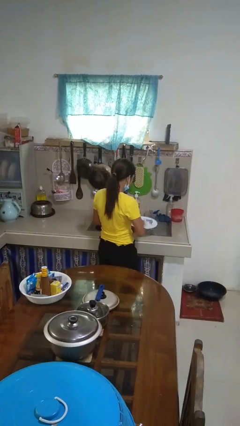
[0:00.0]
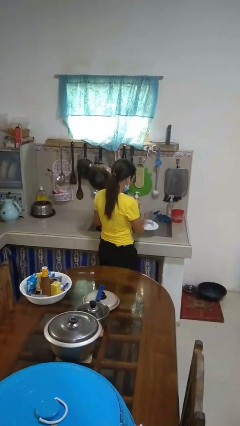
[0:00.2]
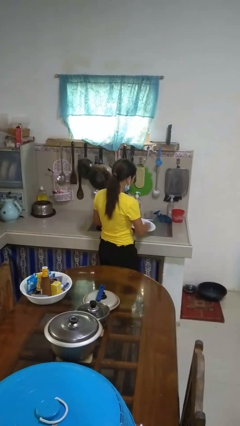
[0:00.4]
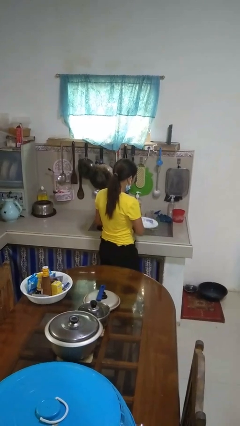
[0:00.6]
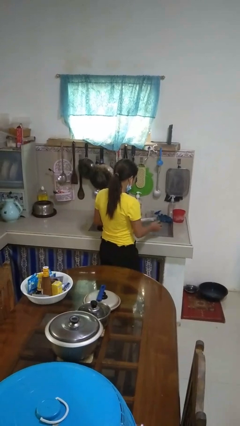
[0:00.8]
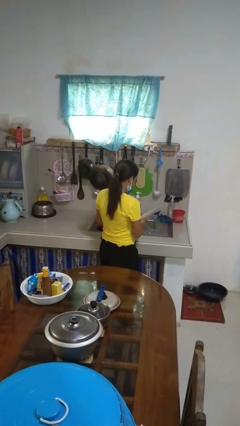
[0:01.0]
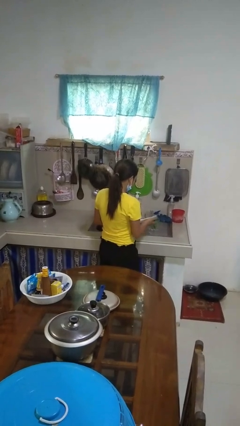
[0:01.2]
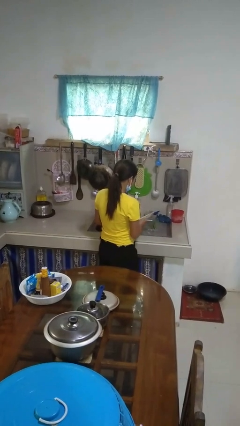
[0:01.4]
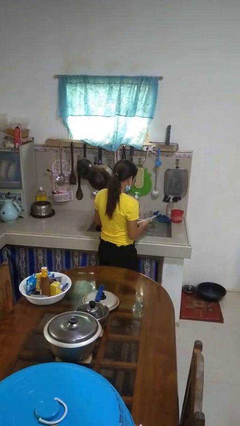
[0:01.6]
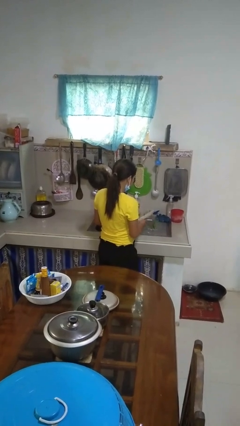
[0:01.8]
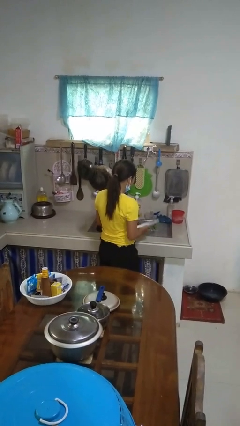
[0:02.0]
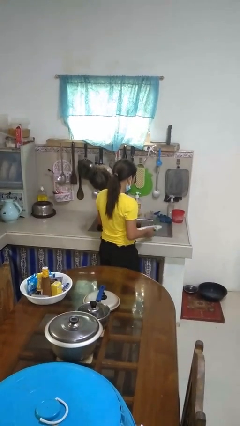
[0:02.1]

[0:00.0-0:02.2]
person washes dish

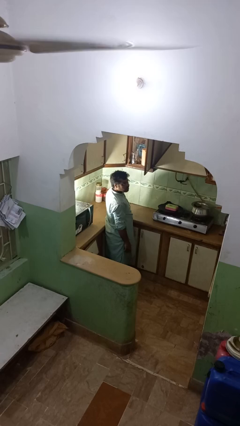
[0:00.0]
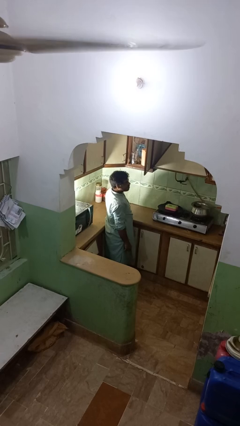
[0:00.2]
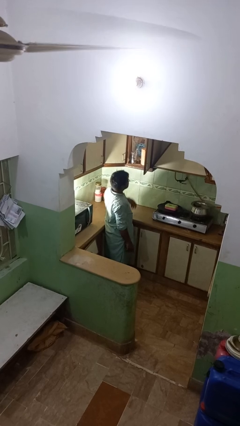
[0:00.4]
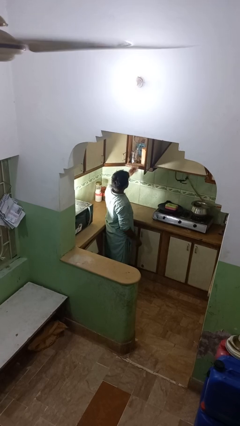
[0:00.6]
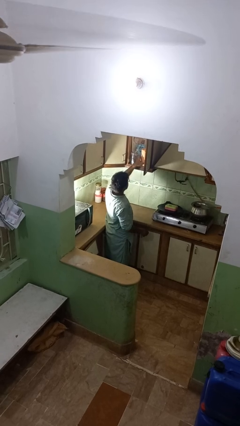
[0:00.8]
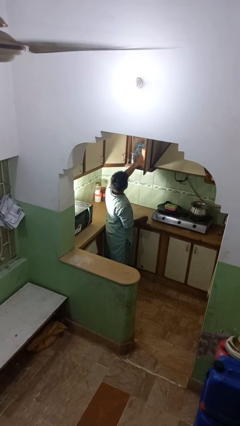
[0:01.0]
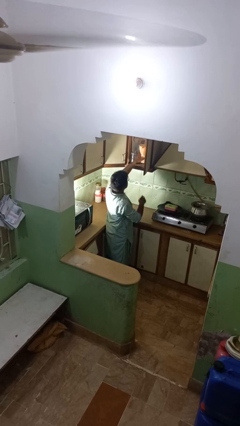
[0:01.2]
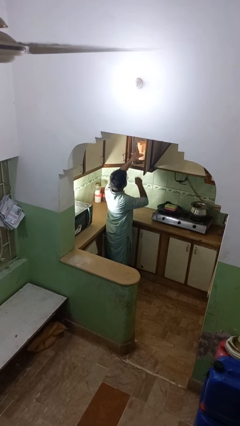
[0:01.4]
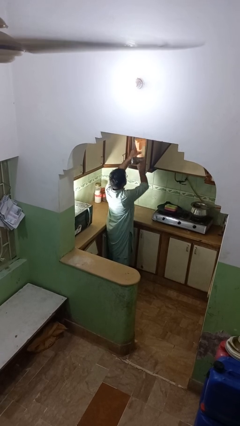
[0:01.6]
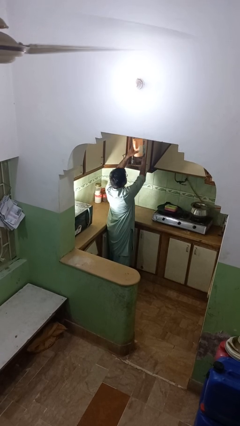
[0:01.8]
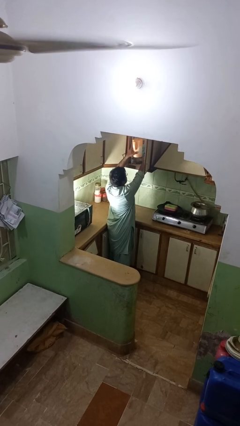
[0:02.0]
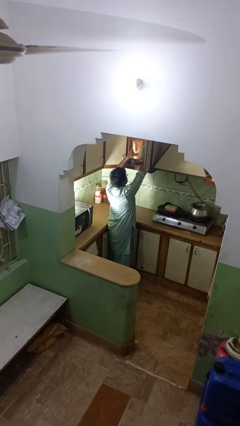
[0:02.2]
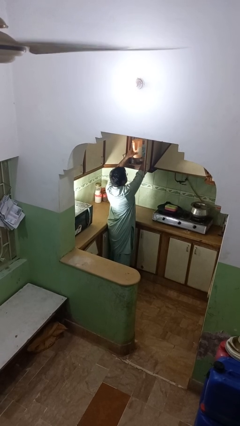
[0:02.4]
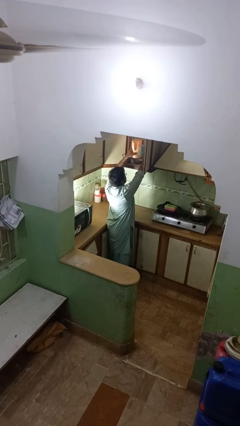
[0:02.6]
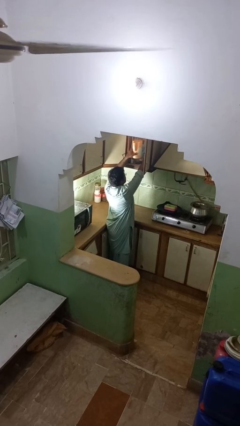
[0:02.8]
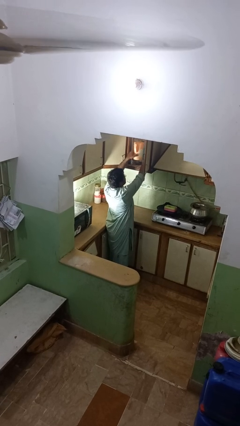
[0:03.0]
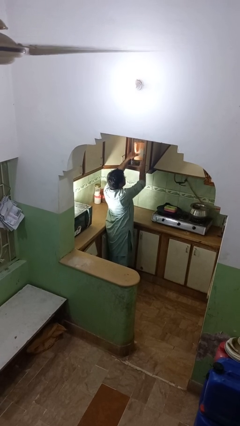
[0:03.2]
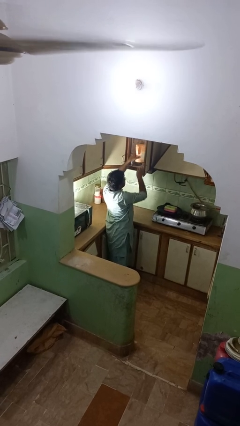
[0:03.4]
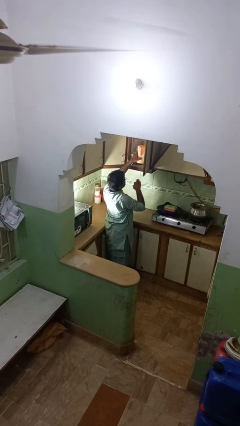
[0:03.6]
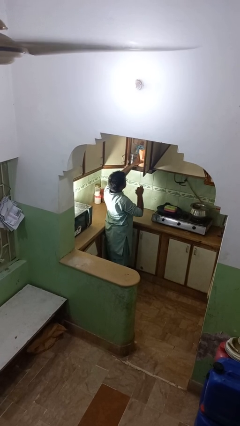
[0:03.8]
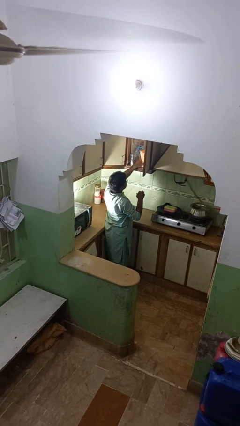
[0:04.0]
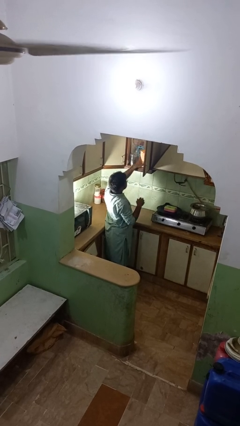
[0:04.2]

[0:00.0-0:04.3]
person searches in kitchen drawer

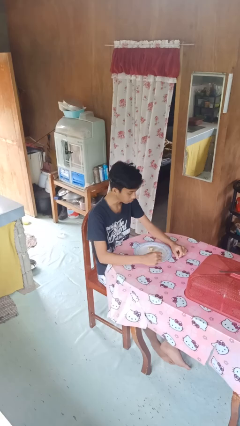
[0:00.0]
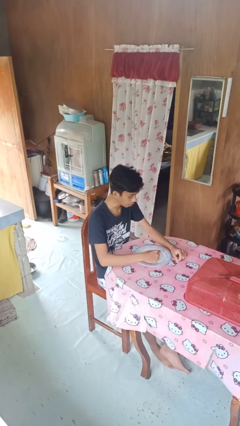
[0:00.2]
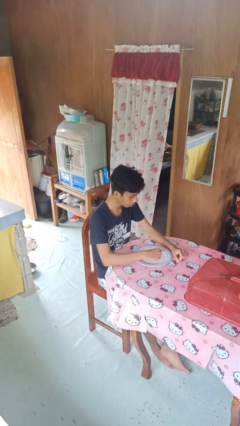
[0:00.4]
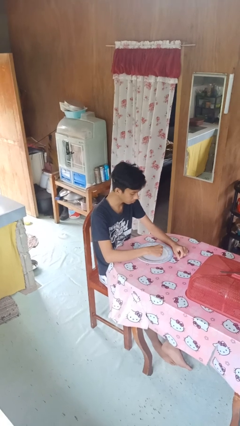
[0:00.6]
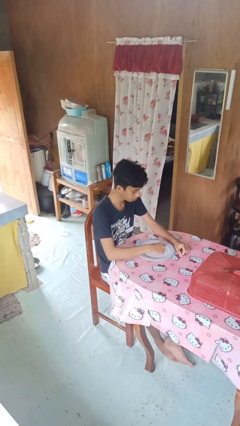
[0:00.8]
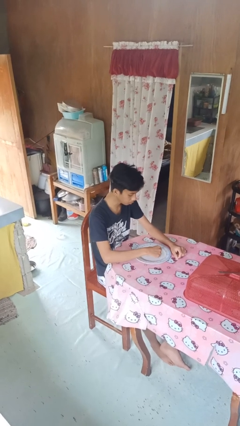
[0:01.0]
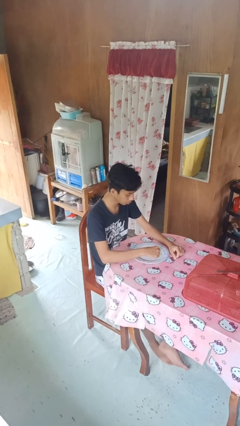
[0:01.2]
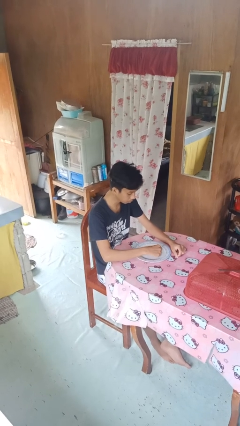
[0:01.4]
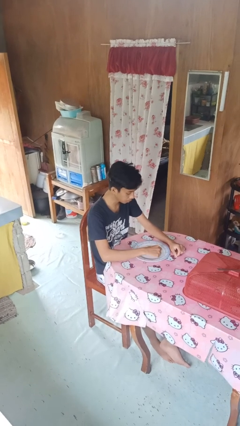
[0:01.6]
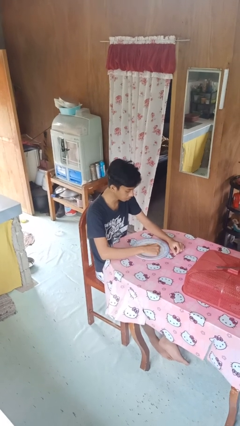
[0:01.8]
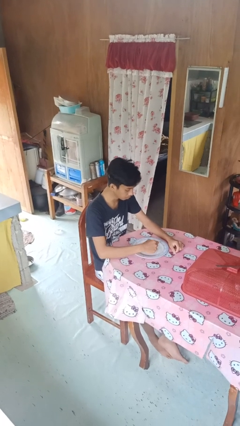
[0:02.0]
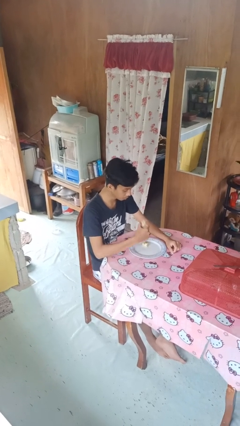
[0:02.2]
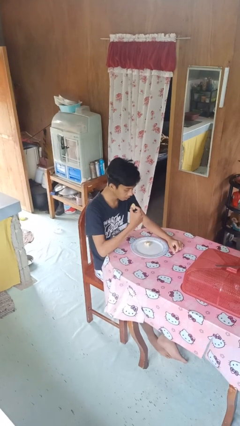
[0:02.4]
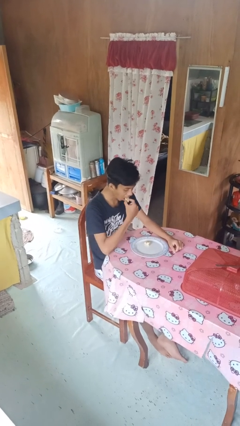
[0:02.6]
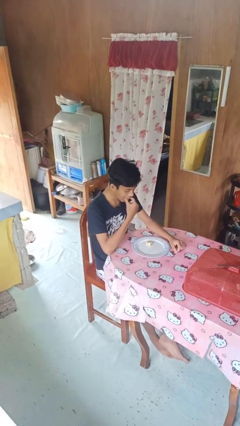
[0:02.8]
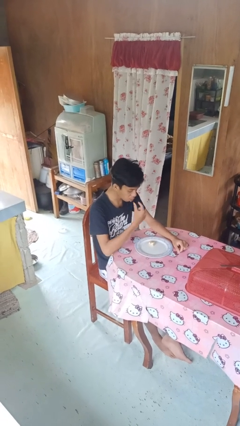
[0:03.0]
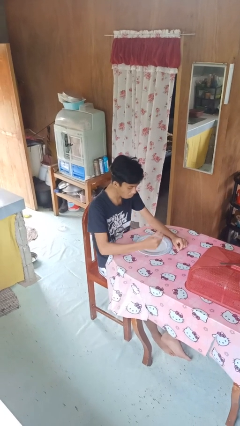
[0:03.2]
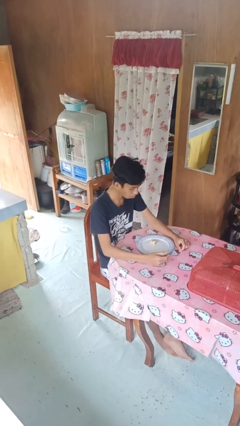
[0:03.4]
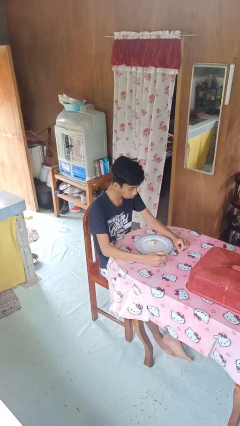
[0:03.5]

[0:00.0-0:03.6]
person eats with hands

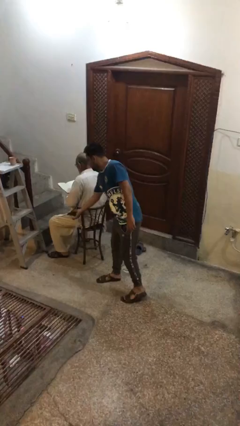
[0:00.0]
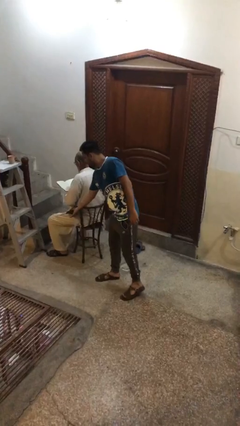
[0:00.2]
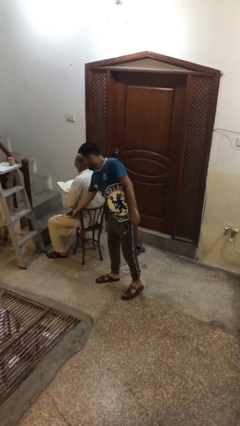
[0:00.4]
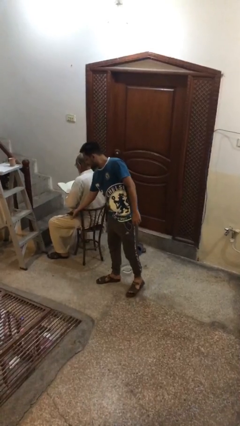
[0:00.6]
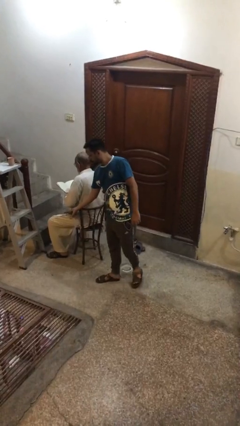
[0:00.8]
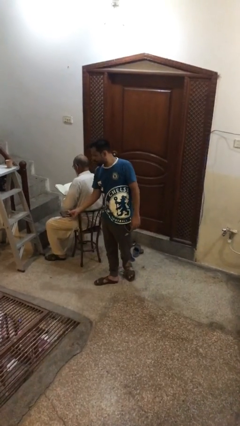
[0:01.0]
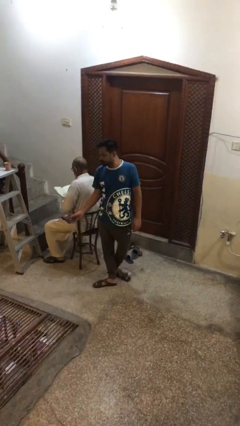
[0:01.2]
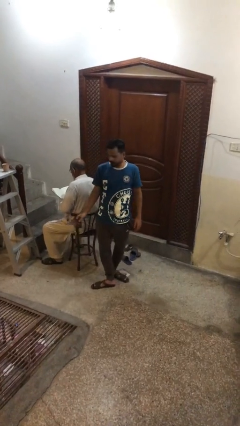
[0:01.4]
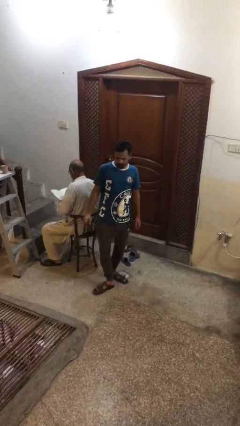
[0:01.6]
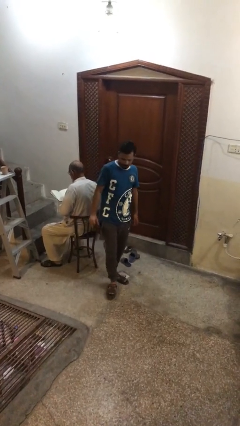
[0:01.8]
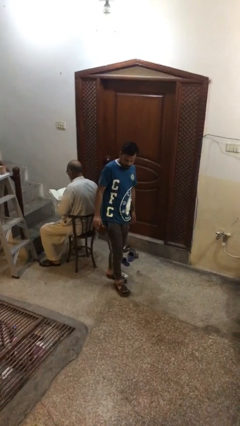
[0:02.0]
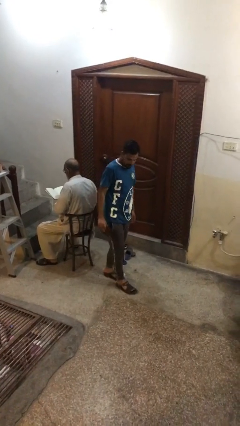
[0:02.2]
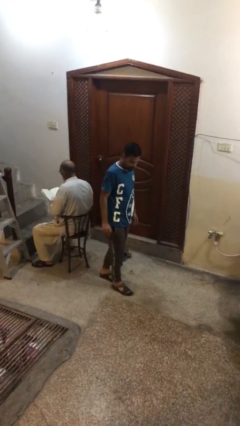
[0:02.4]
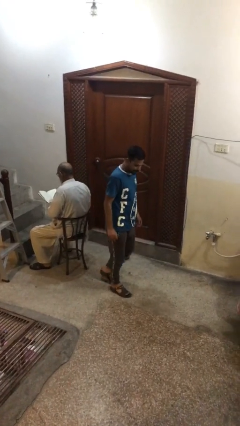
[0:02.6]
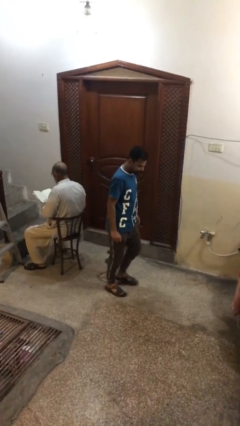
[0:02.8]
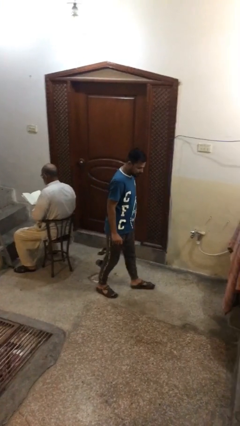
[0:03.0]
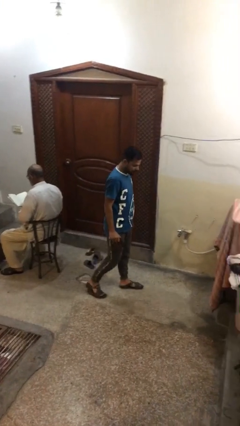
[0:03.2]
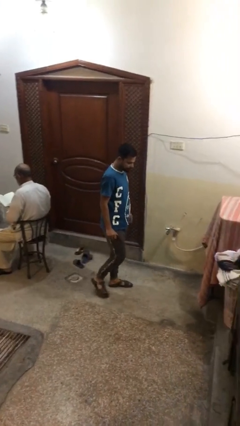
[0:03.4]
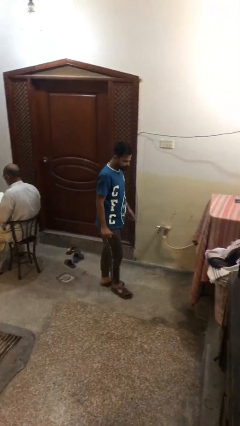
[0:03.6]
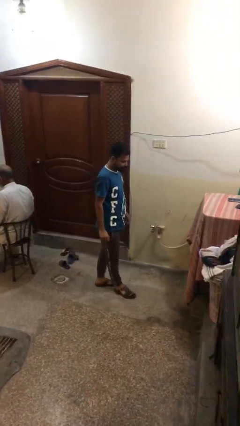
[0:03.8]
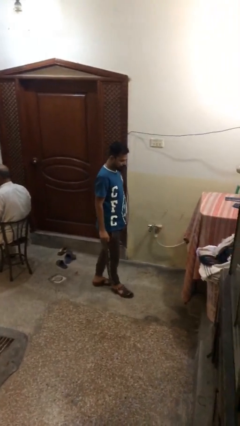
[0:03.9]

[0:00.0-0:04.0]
person steals object from person

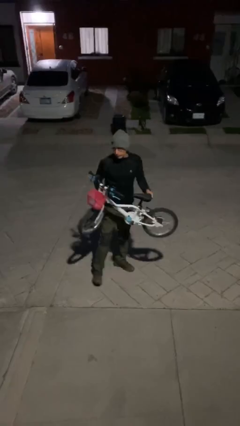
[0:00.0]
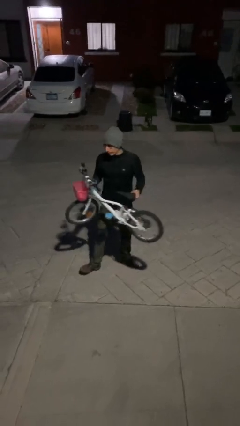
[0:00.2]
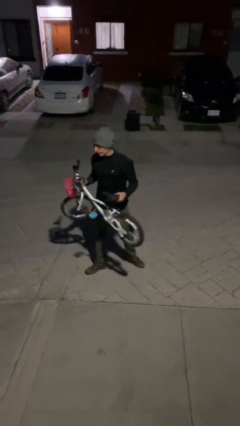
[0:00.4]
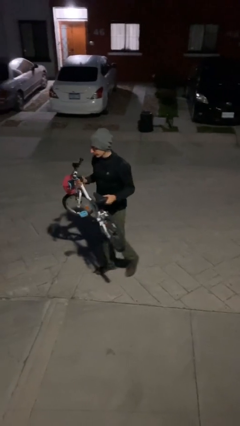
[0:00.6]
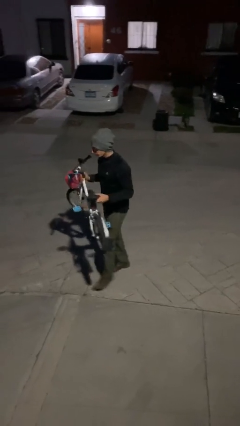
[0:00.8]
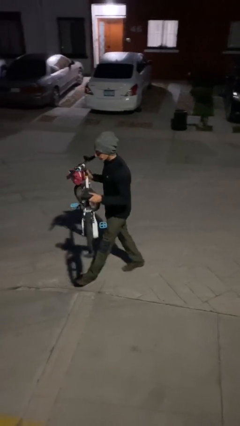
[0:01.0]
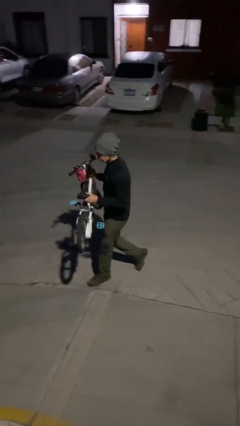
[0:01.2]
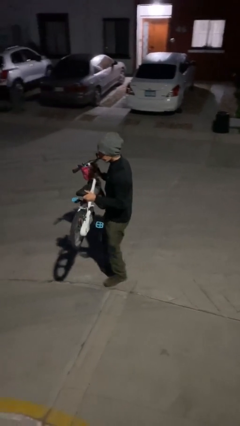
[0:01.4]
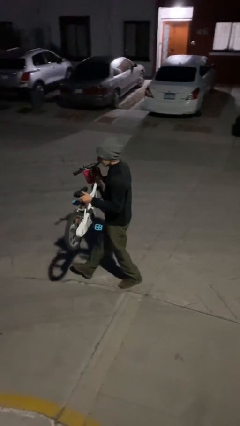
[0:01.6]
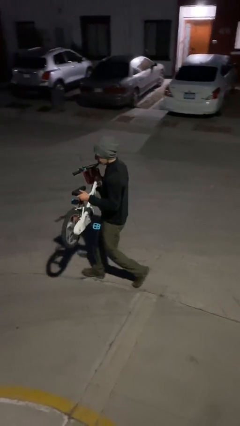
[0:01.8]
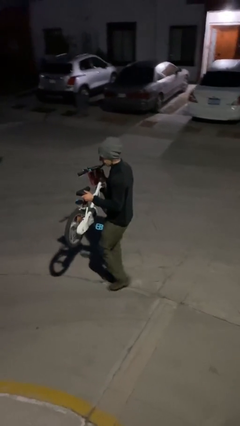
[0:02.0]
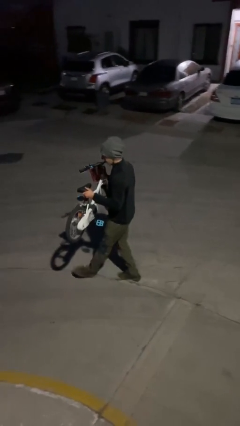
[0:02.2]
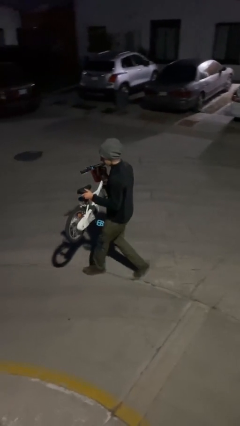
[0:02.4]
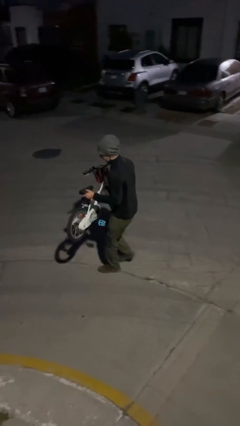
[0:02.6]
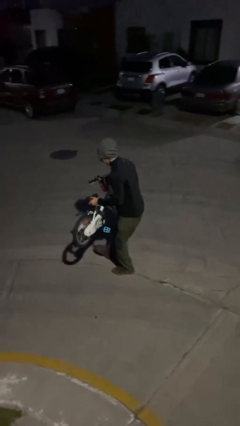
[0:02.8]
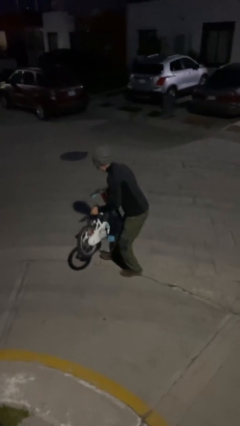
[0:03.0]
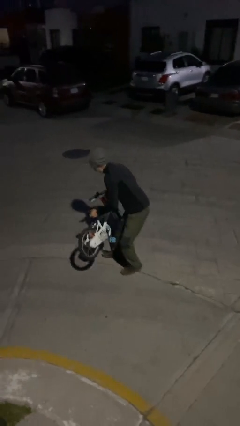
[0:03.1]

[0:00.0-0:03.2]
person carries heavy object

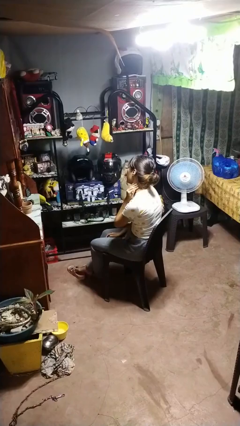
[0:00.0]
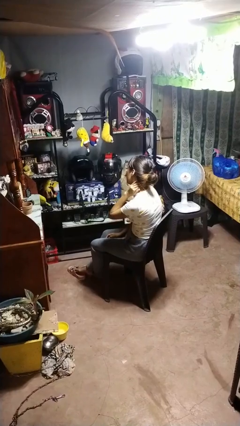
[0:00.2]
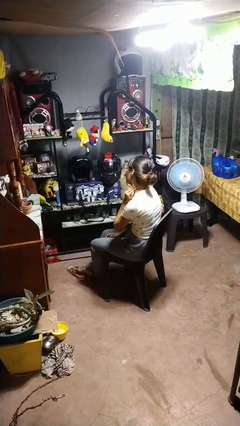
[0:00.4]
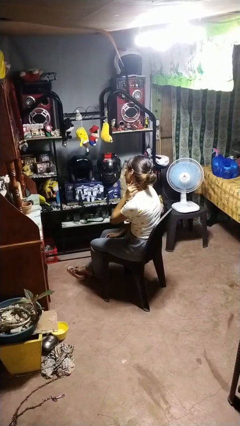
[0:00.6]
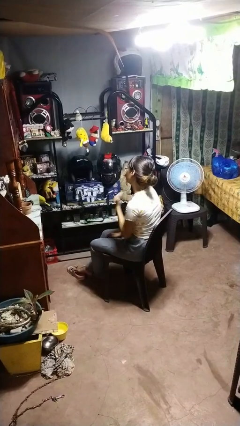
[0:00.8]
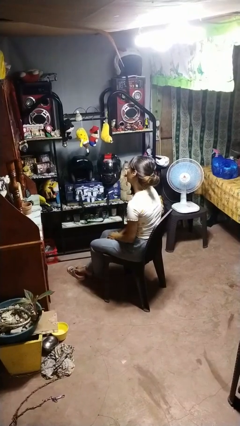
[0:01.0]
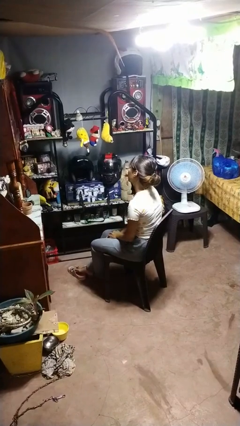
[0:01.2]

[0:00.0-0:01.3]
person rubs neck
